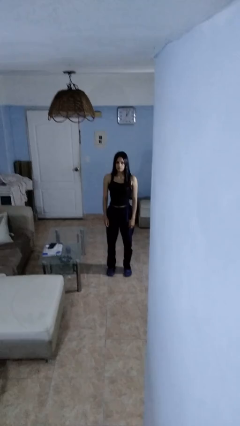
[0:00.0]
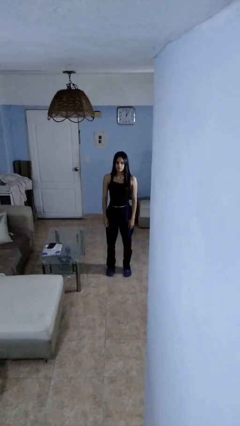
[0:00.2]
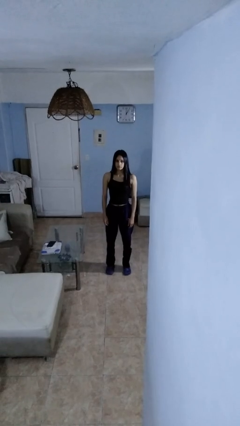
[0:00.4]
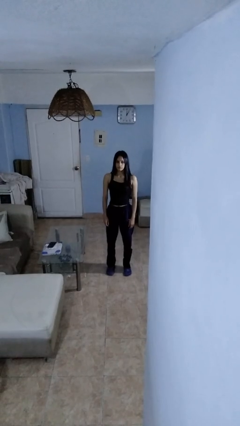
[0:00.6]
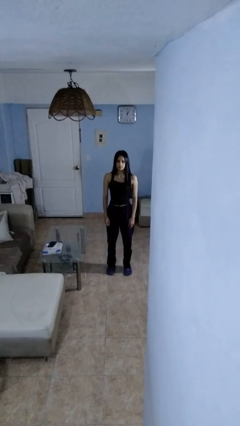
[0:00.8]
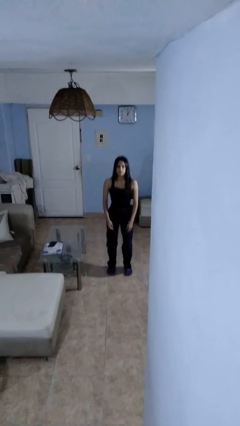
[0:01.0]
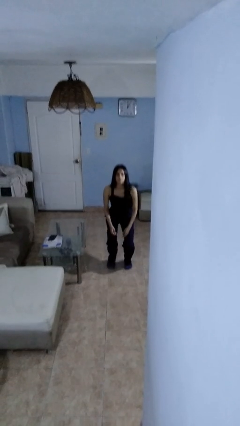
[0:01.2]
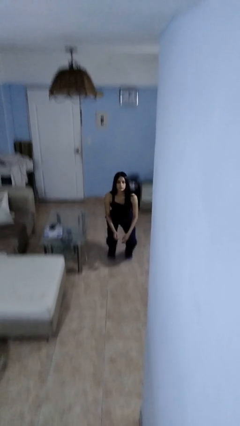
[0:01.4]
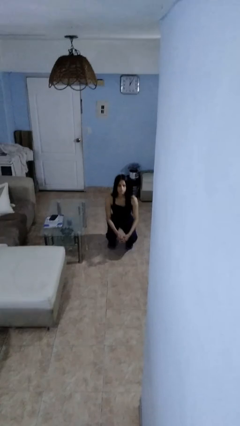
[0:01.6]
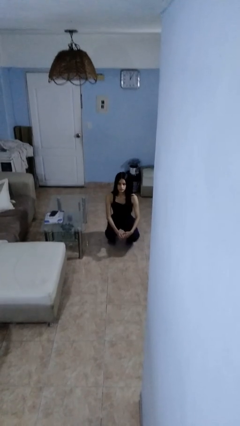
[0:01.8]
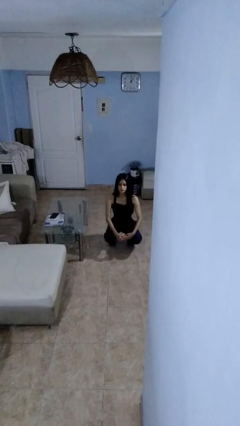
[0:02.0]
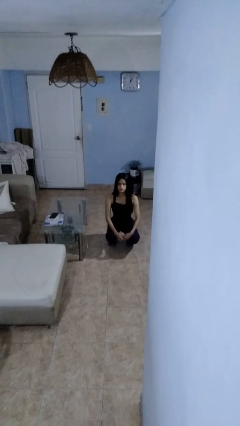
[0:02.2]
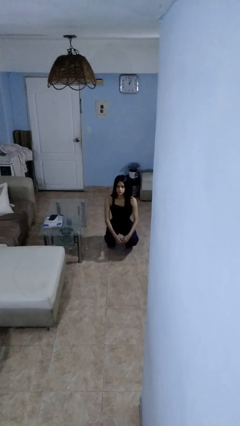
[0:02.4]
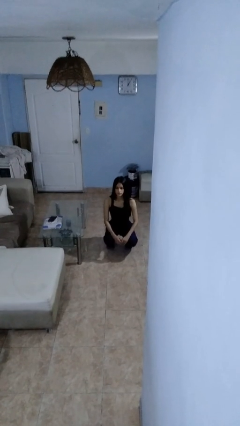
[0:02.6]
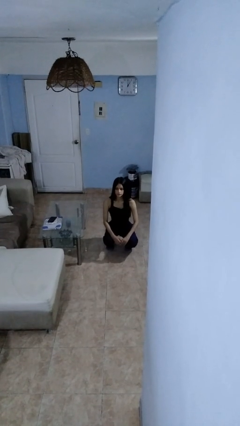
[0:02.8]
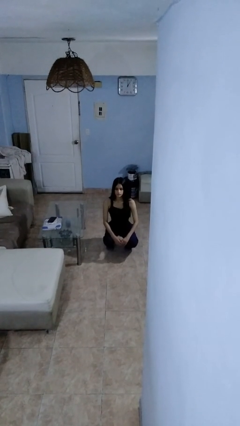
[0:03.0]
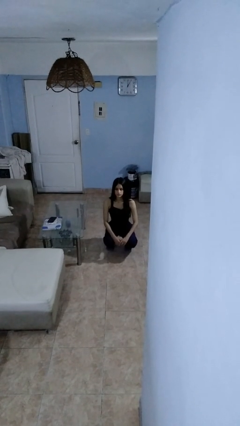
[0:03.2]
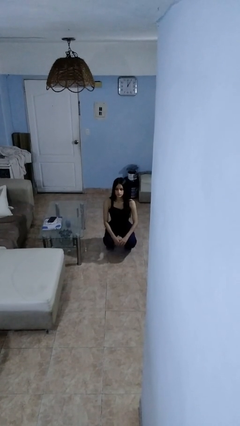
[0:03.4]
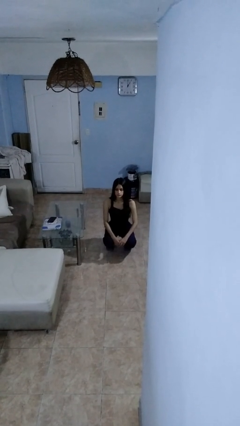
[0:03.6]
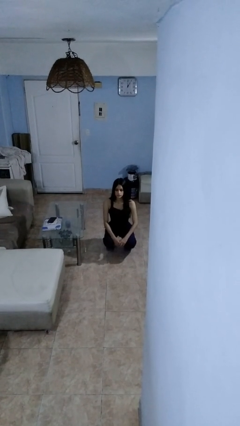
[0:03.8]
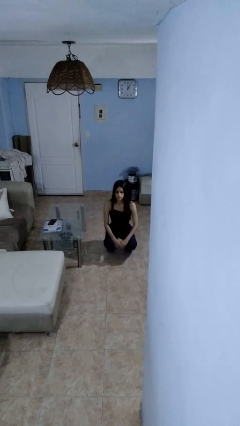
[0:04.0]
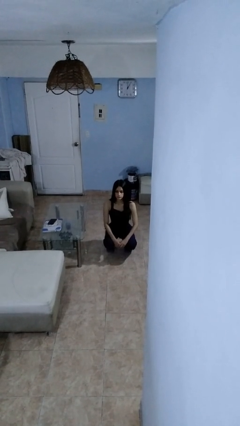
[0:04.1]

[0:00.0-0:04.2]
person squats

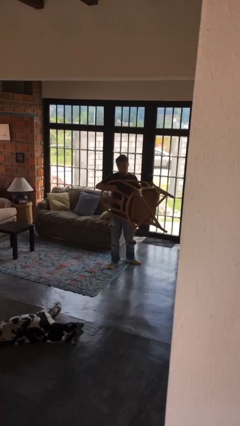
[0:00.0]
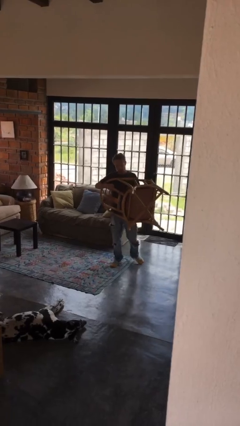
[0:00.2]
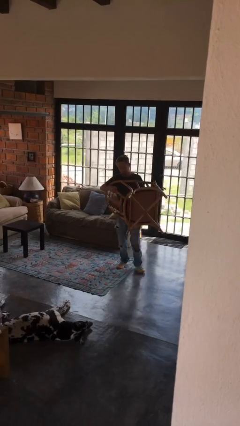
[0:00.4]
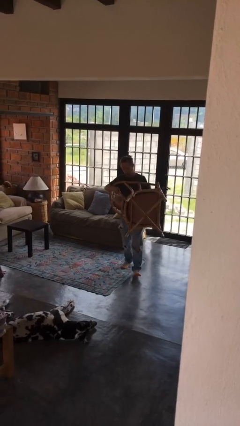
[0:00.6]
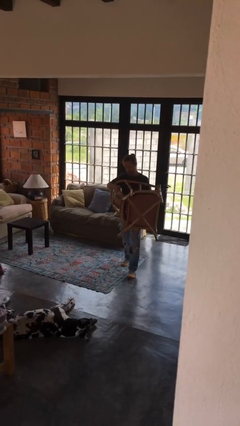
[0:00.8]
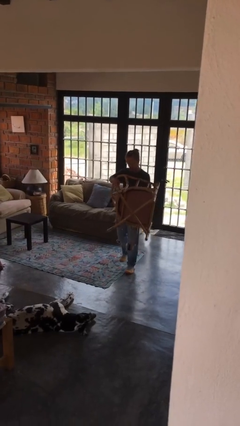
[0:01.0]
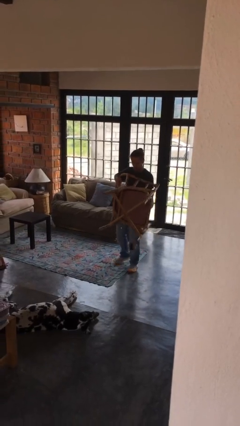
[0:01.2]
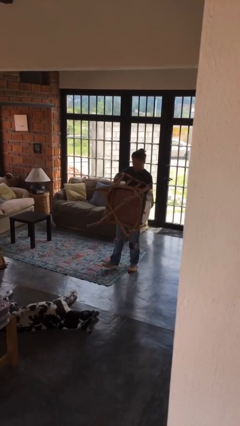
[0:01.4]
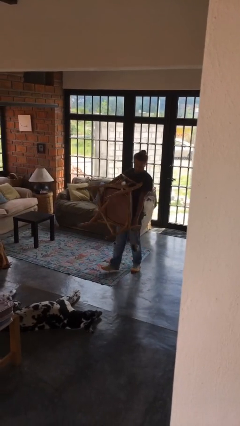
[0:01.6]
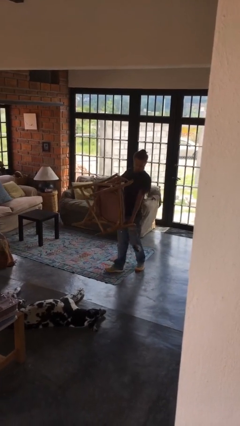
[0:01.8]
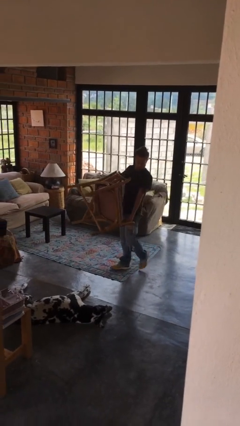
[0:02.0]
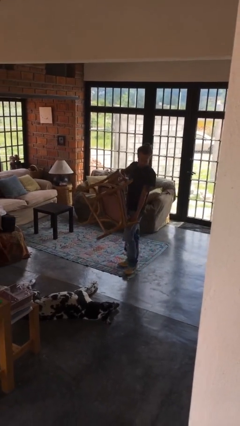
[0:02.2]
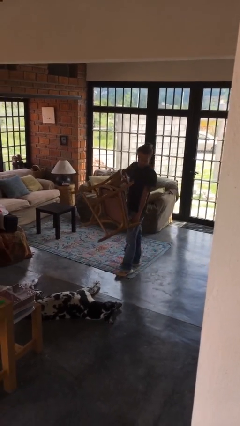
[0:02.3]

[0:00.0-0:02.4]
person carries furniture

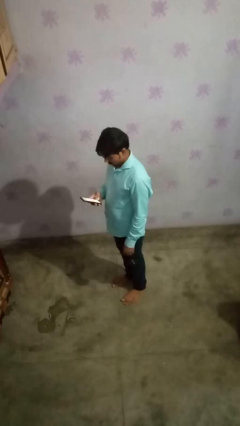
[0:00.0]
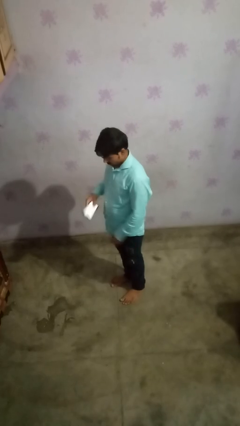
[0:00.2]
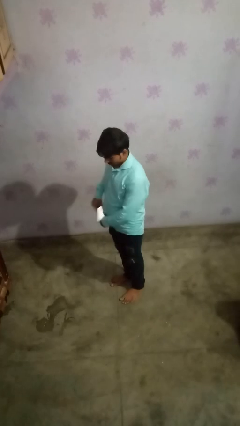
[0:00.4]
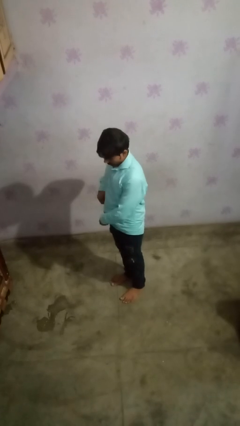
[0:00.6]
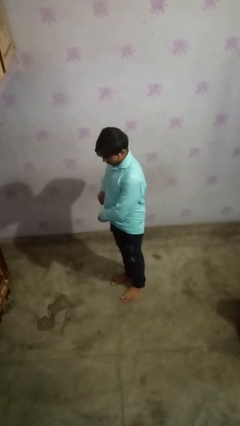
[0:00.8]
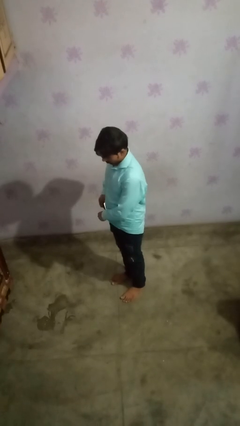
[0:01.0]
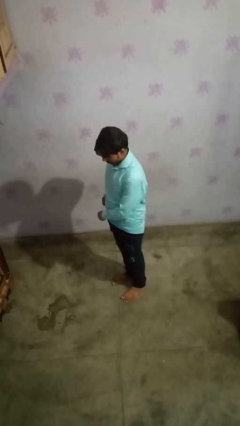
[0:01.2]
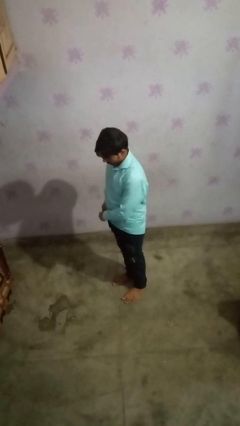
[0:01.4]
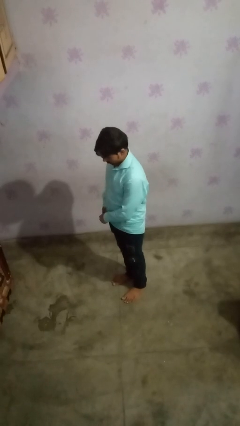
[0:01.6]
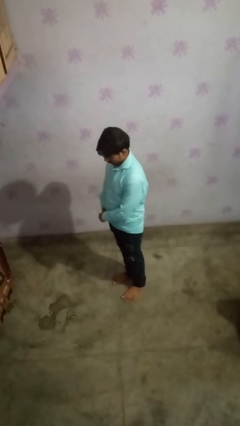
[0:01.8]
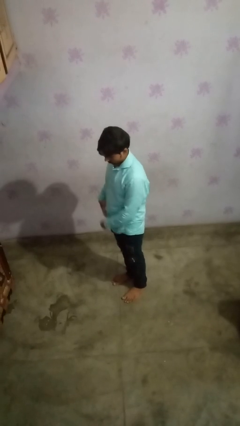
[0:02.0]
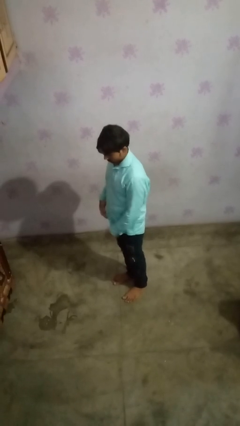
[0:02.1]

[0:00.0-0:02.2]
person puts phone into pocket

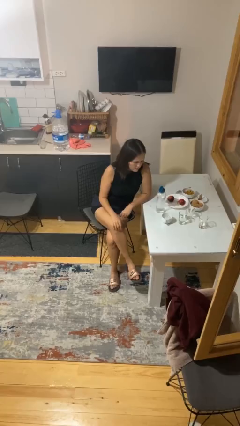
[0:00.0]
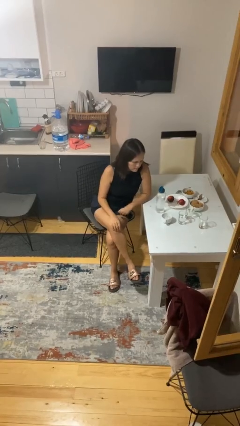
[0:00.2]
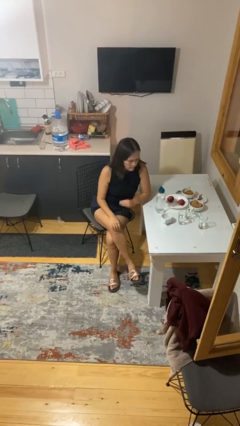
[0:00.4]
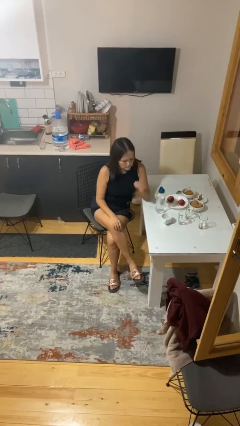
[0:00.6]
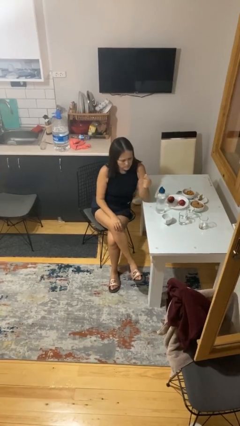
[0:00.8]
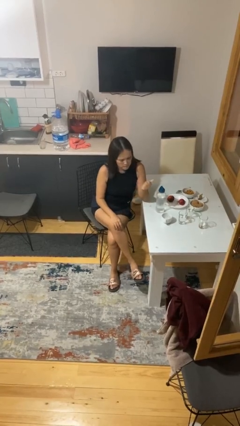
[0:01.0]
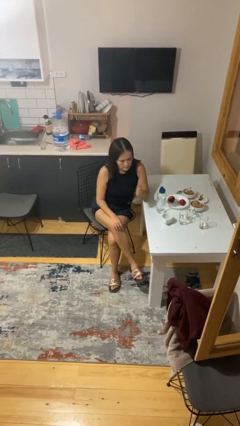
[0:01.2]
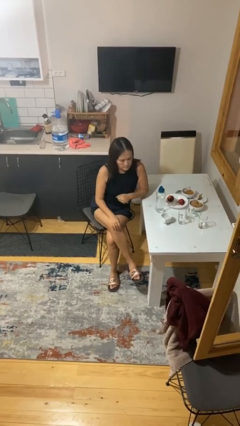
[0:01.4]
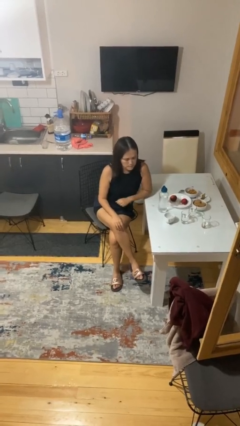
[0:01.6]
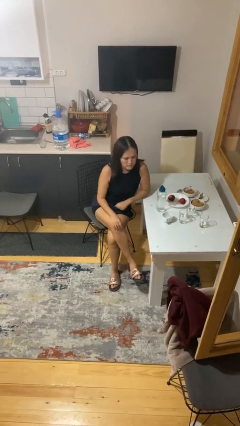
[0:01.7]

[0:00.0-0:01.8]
person snaps fingers

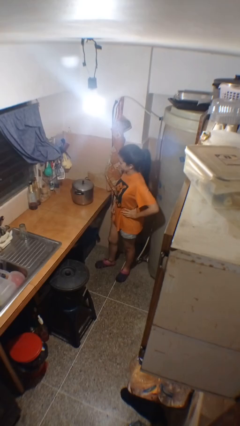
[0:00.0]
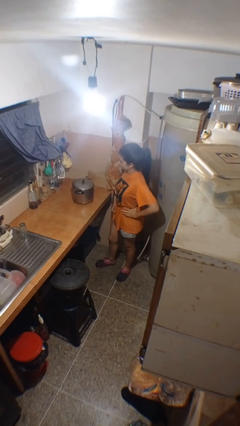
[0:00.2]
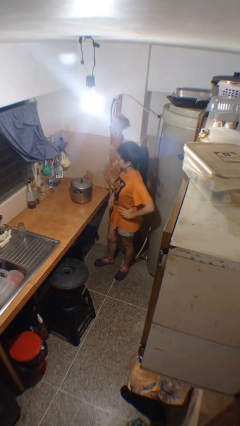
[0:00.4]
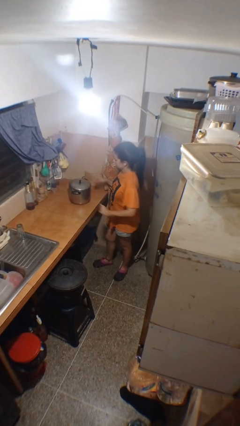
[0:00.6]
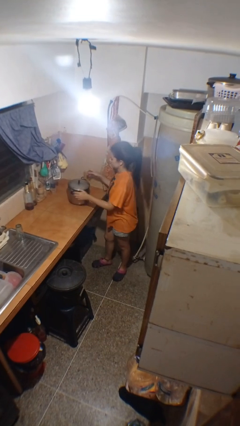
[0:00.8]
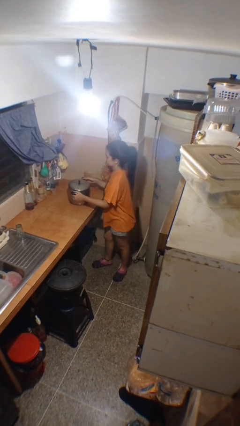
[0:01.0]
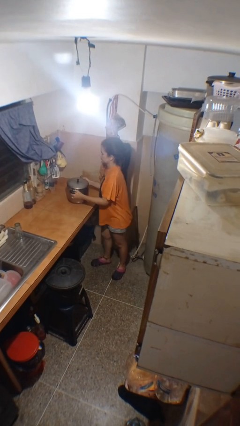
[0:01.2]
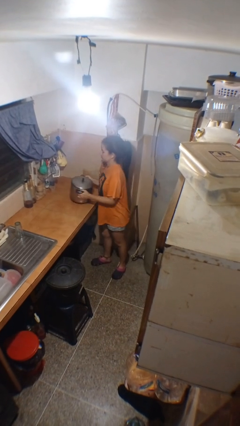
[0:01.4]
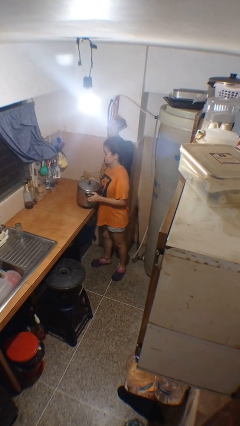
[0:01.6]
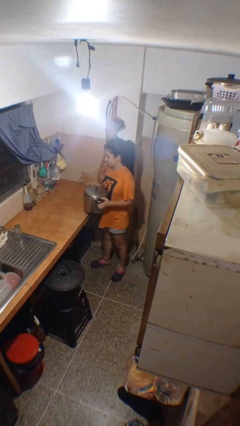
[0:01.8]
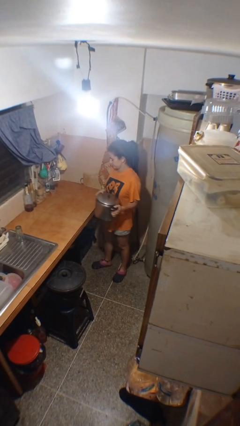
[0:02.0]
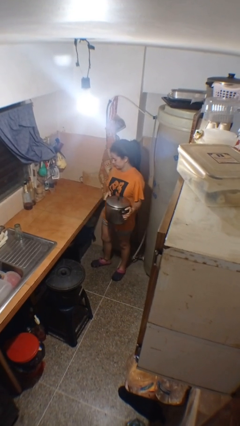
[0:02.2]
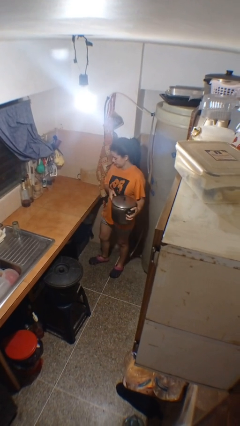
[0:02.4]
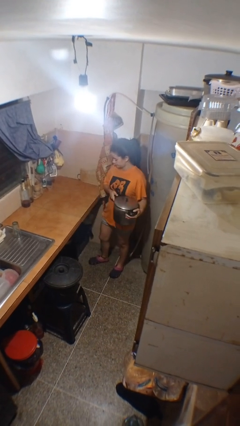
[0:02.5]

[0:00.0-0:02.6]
person picks up object from countertop

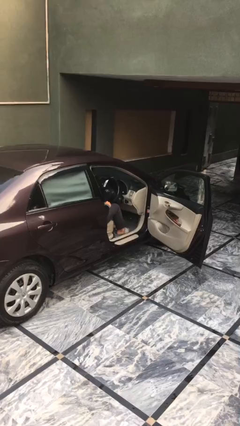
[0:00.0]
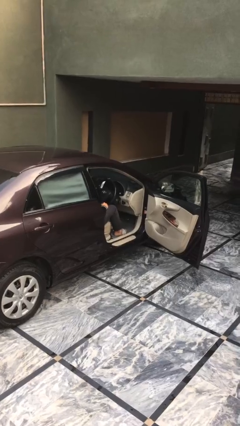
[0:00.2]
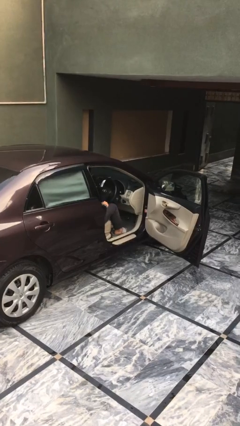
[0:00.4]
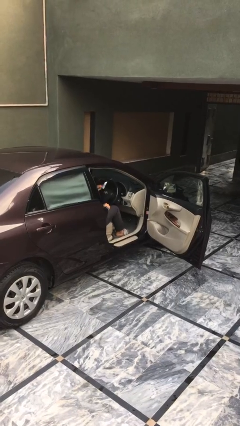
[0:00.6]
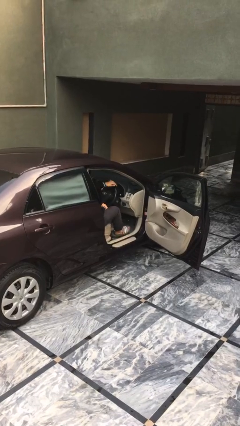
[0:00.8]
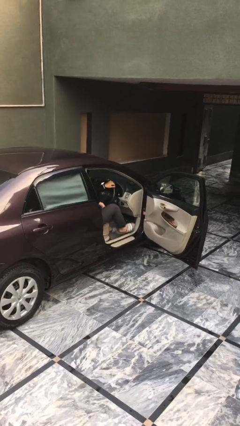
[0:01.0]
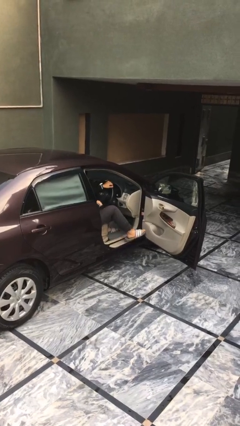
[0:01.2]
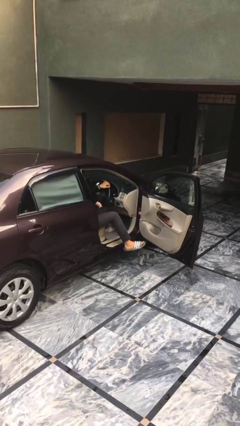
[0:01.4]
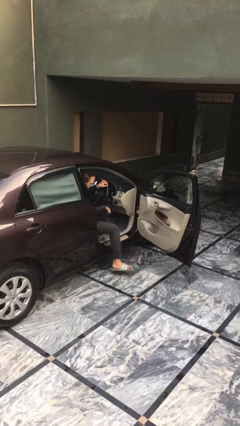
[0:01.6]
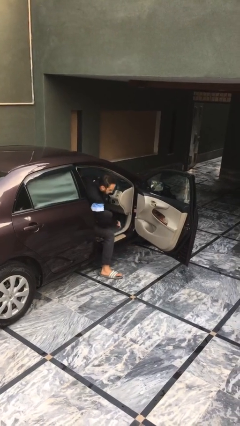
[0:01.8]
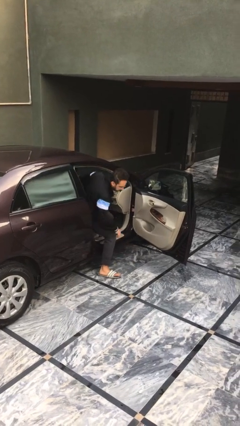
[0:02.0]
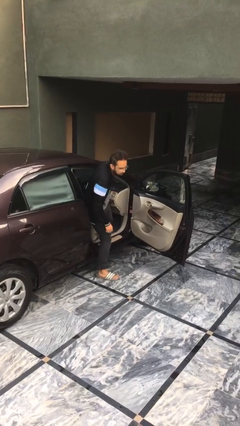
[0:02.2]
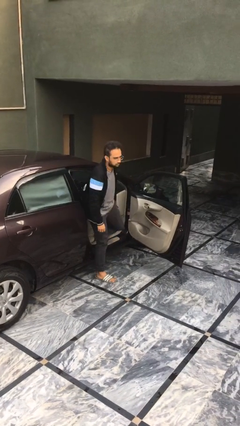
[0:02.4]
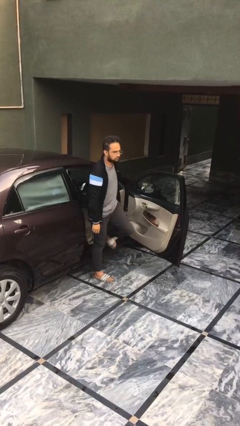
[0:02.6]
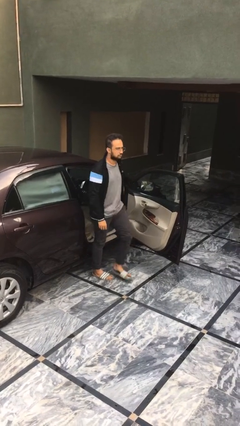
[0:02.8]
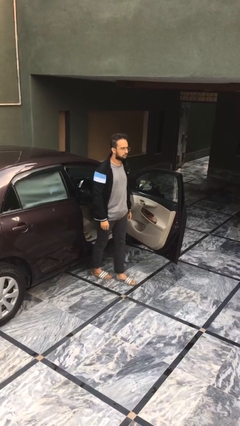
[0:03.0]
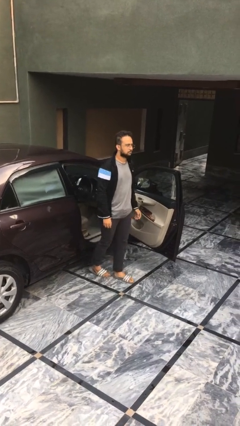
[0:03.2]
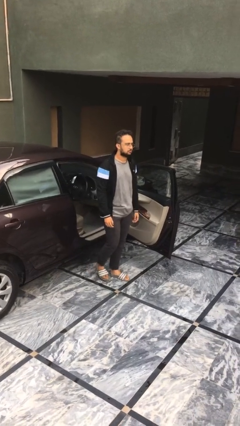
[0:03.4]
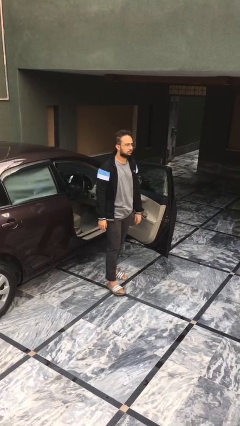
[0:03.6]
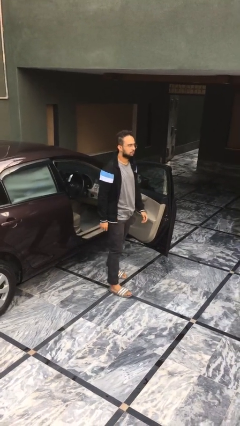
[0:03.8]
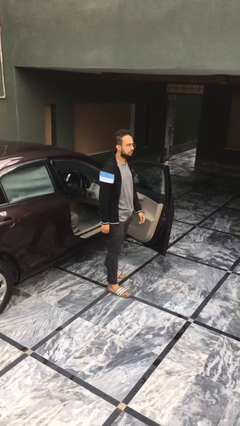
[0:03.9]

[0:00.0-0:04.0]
person exits car

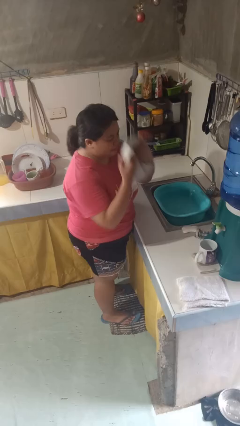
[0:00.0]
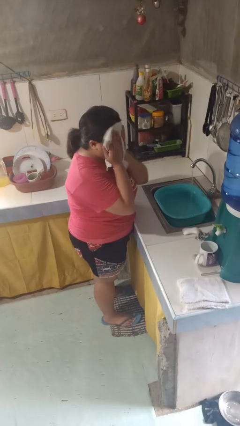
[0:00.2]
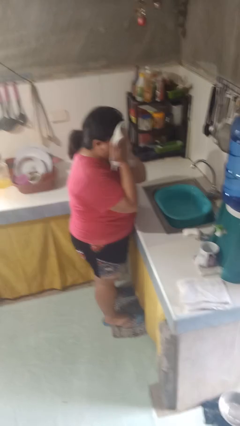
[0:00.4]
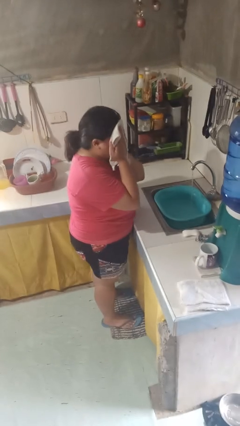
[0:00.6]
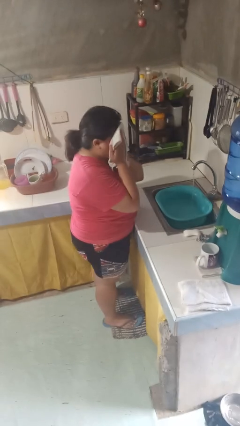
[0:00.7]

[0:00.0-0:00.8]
person dries face with towel
